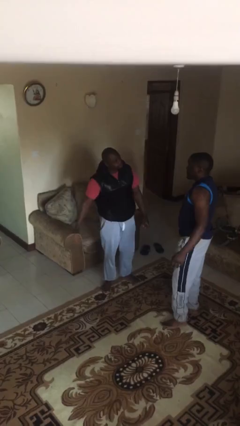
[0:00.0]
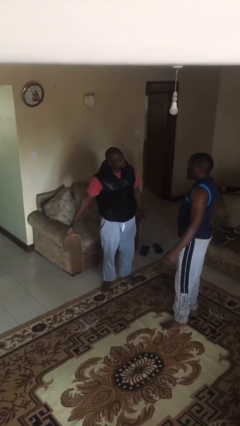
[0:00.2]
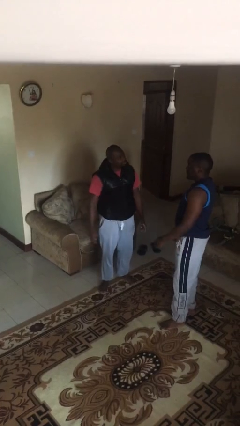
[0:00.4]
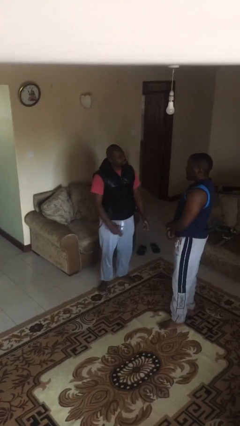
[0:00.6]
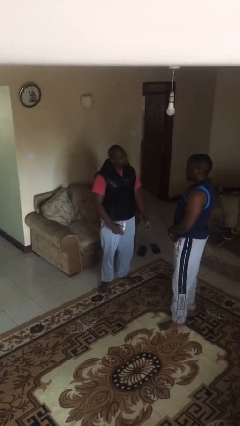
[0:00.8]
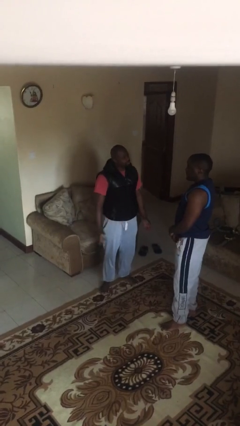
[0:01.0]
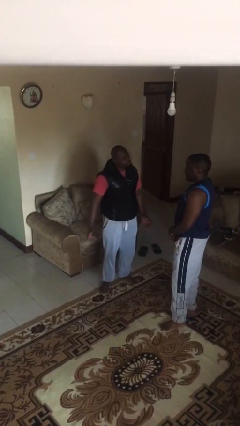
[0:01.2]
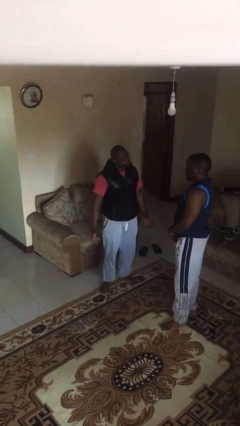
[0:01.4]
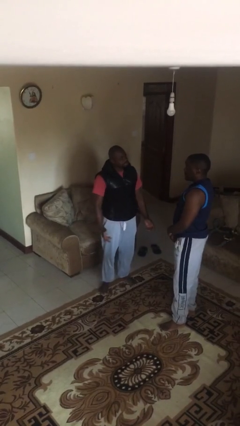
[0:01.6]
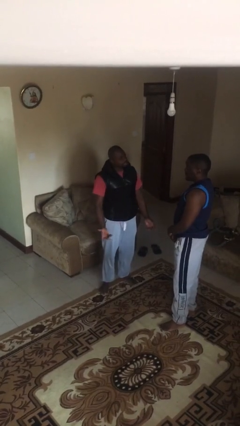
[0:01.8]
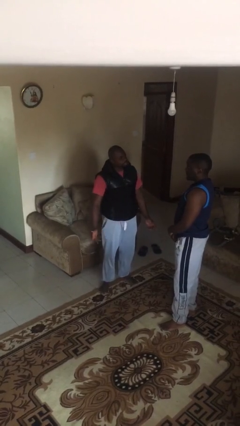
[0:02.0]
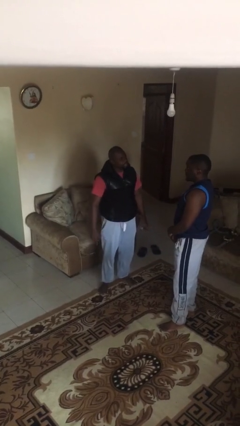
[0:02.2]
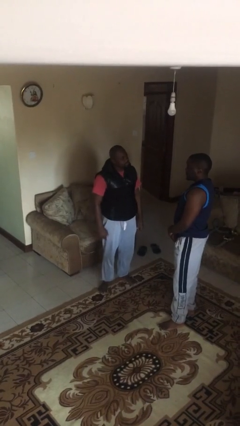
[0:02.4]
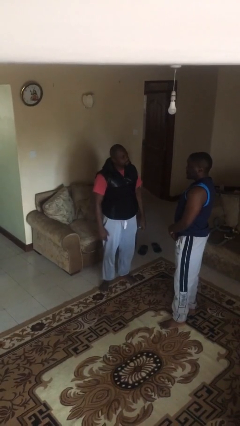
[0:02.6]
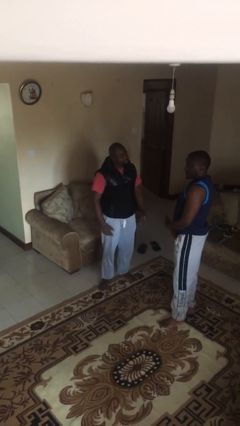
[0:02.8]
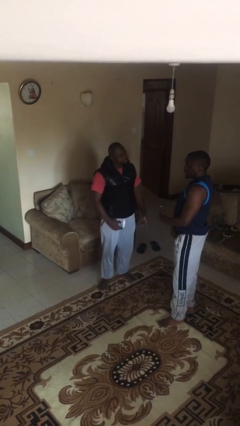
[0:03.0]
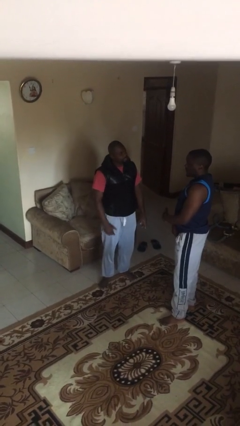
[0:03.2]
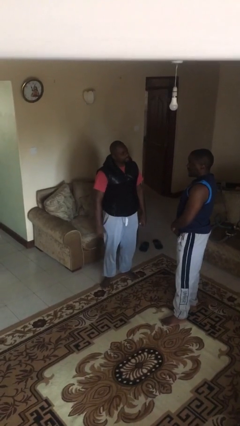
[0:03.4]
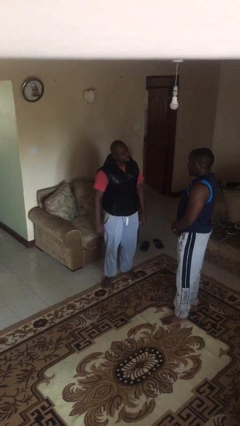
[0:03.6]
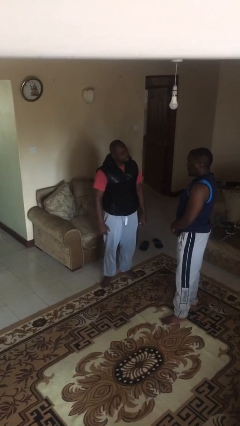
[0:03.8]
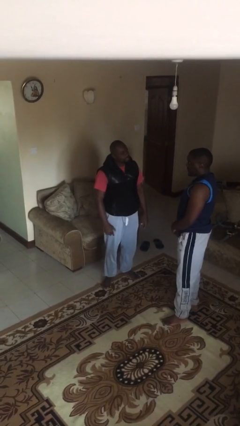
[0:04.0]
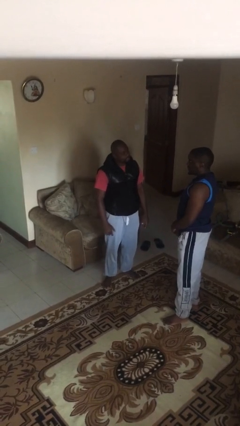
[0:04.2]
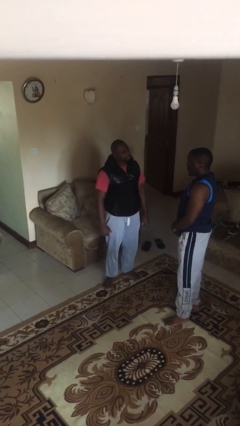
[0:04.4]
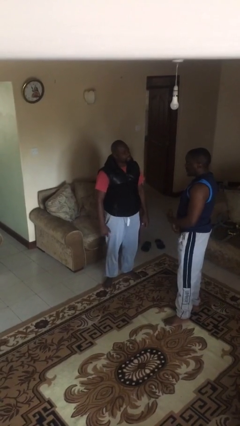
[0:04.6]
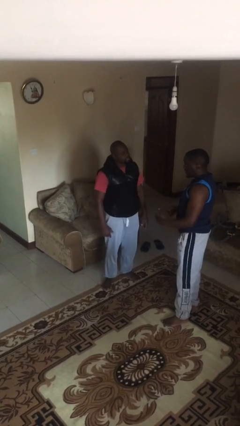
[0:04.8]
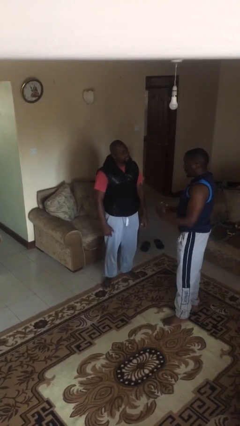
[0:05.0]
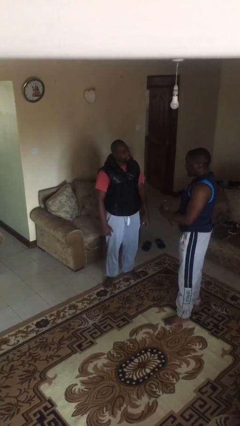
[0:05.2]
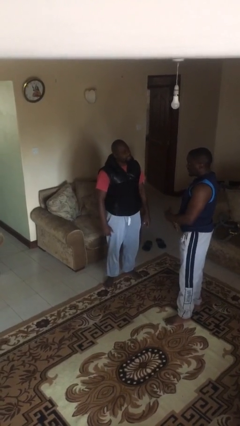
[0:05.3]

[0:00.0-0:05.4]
person talks to person

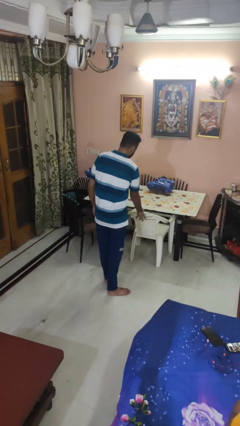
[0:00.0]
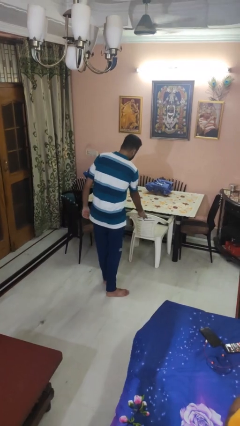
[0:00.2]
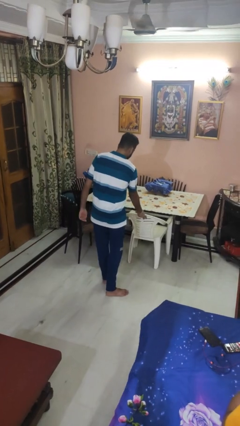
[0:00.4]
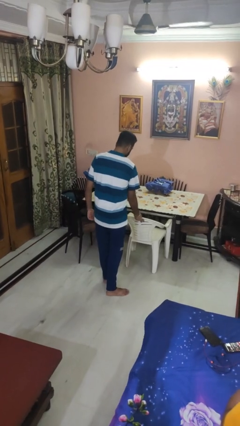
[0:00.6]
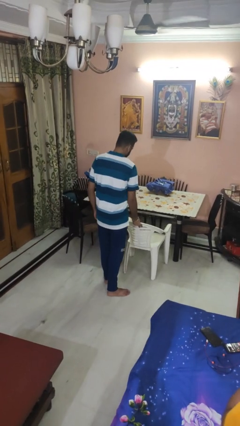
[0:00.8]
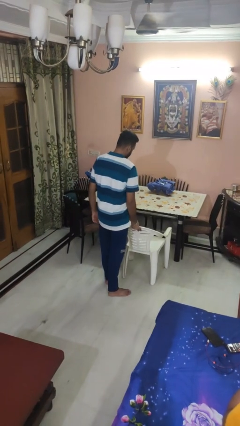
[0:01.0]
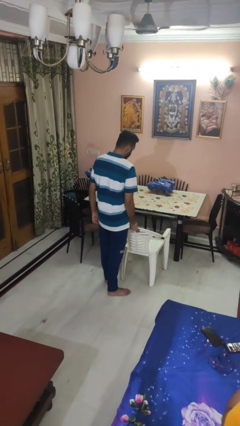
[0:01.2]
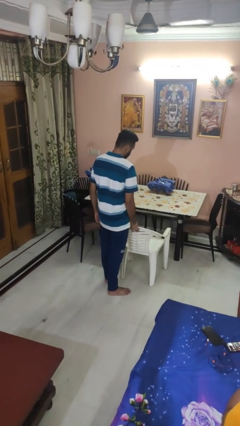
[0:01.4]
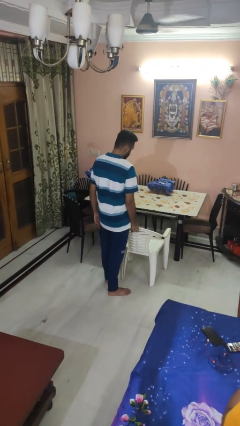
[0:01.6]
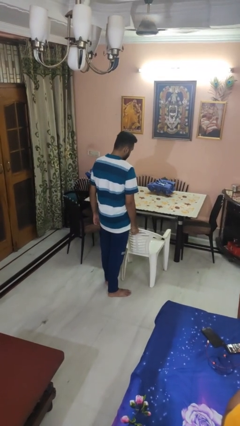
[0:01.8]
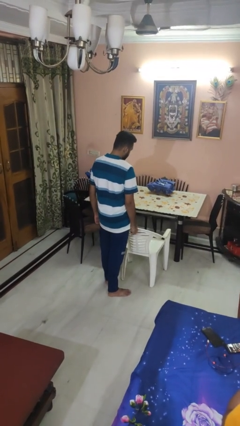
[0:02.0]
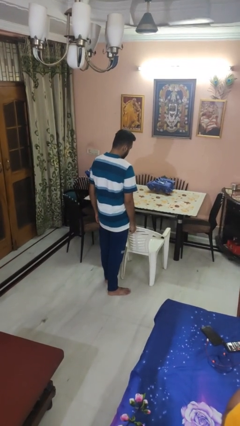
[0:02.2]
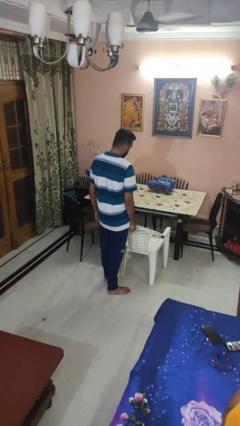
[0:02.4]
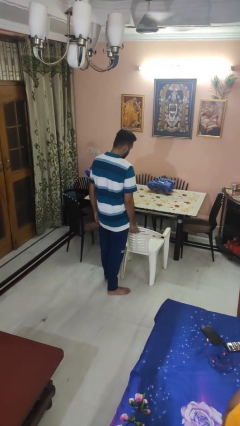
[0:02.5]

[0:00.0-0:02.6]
person pulls out chair

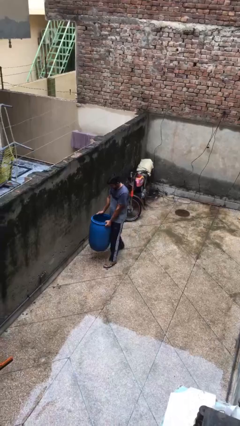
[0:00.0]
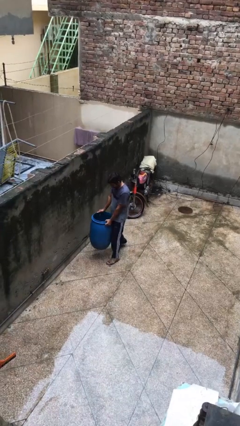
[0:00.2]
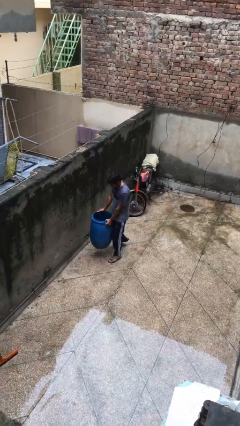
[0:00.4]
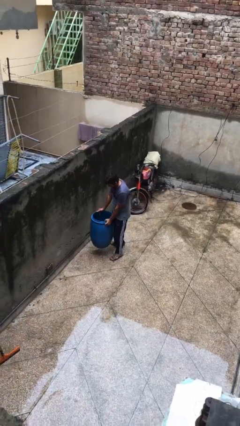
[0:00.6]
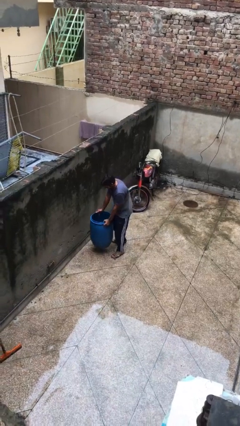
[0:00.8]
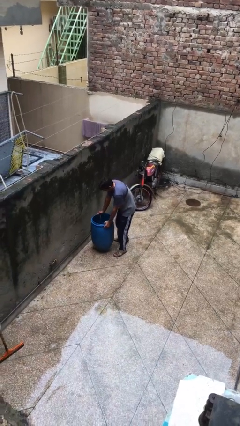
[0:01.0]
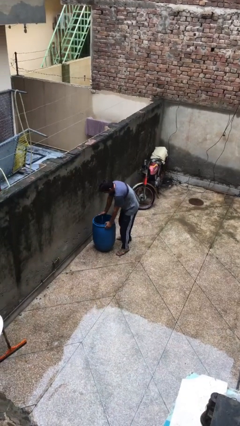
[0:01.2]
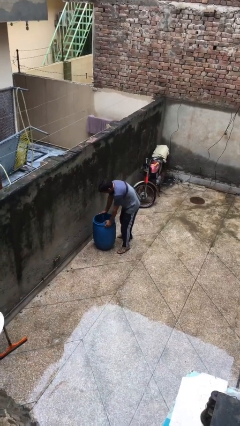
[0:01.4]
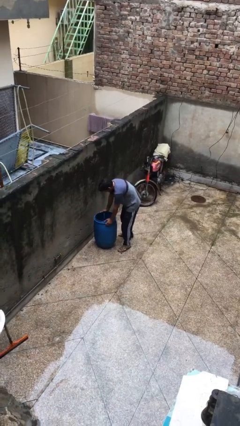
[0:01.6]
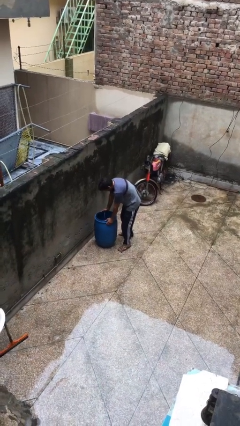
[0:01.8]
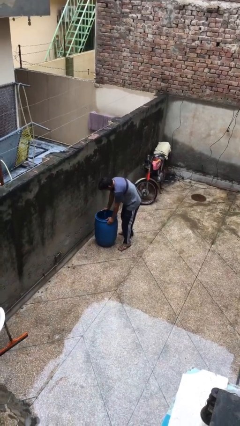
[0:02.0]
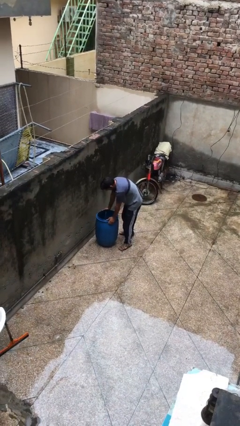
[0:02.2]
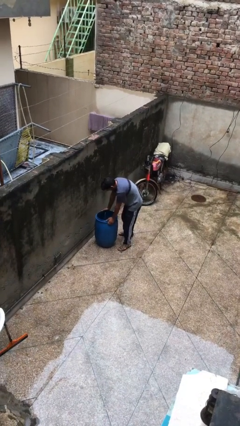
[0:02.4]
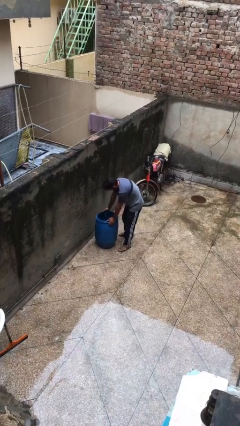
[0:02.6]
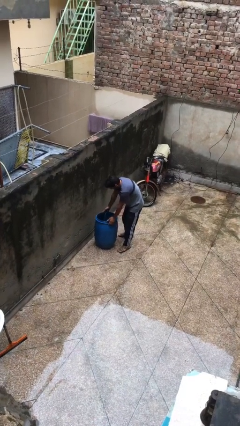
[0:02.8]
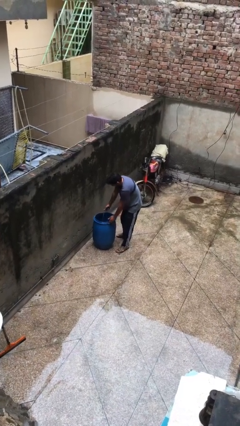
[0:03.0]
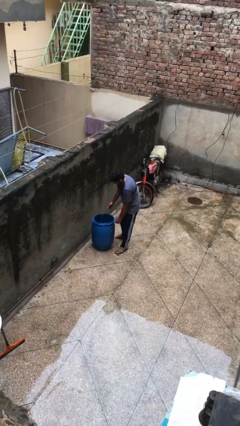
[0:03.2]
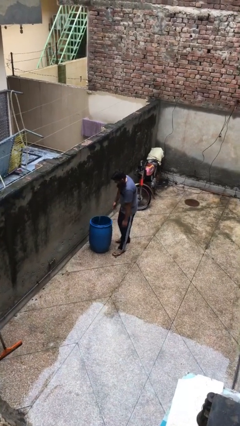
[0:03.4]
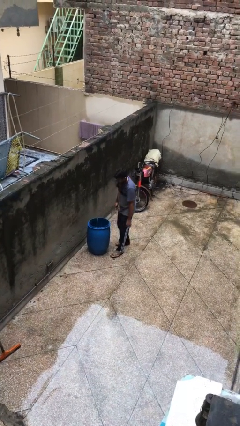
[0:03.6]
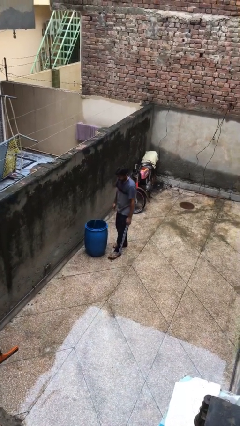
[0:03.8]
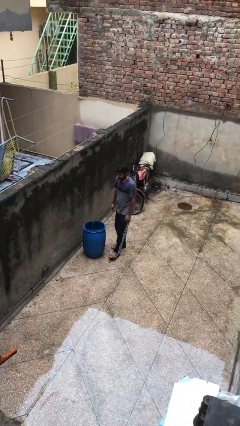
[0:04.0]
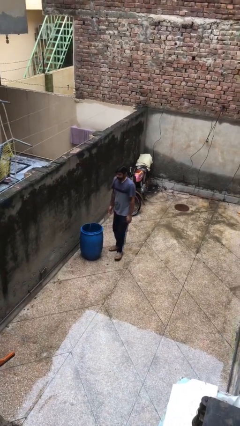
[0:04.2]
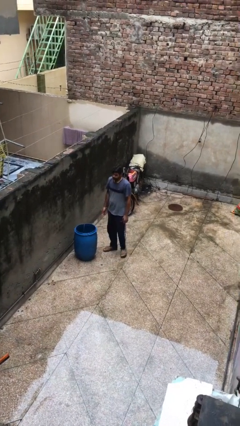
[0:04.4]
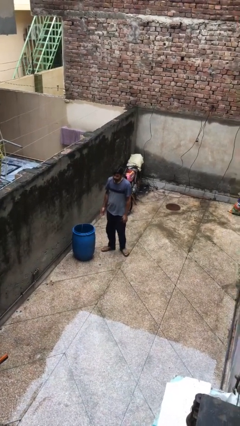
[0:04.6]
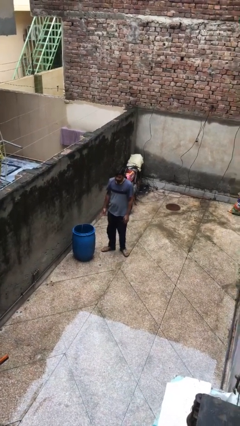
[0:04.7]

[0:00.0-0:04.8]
person puts down object on floor

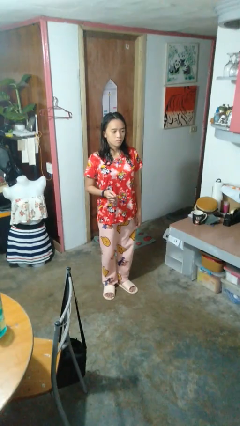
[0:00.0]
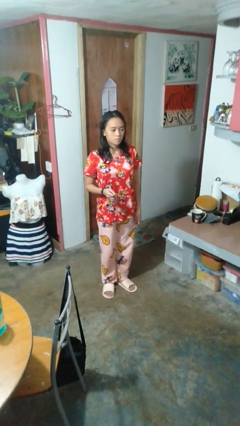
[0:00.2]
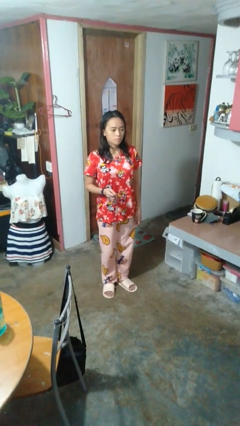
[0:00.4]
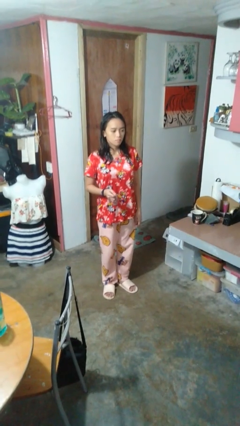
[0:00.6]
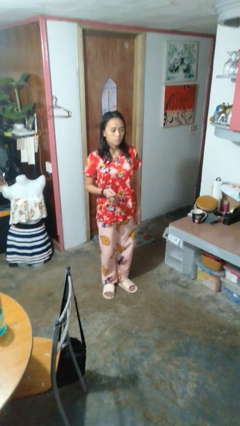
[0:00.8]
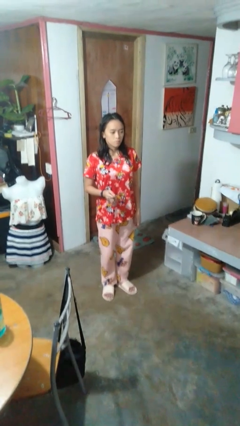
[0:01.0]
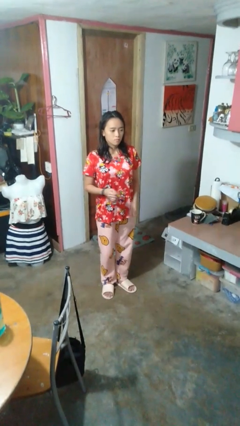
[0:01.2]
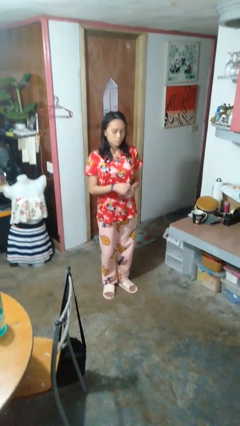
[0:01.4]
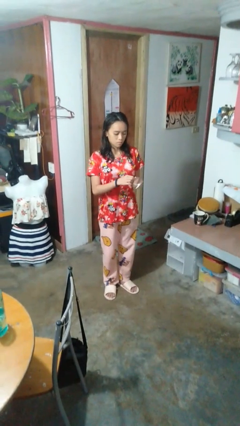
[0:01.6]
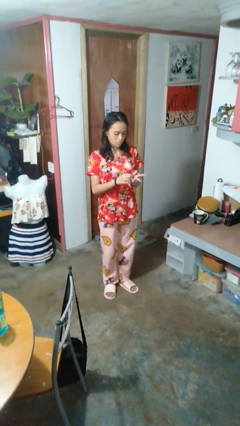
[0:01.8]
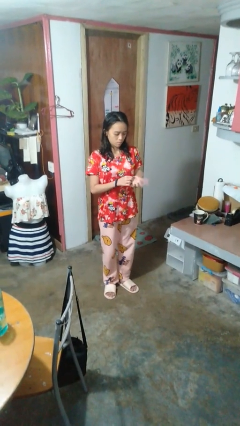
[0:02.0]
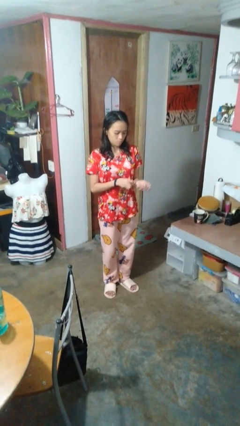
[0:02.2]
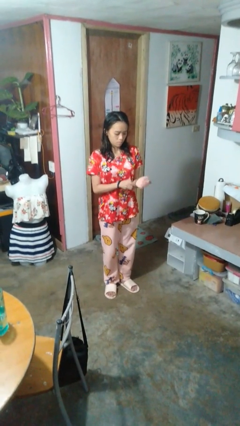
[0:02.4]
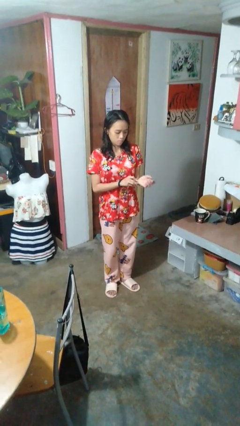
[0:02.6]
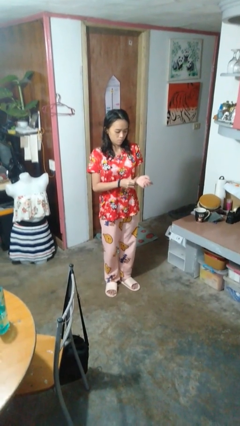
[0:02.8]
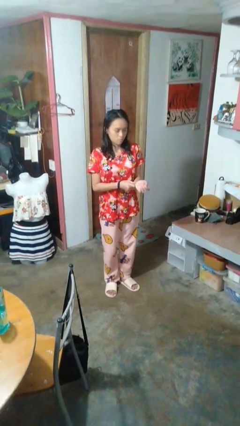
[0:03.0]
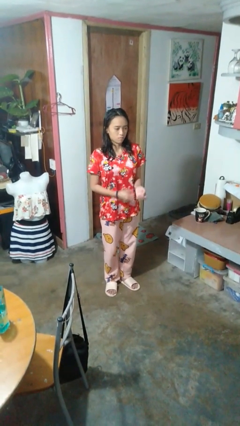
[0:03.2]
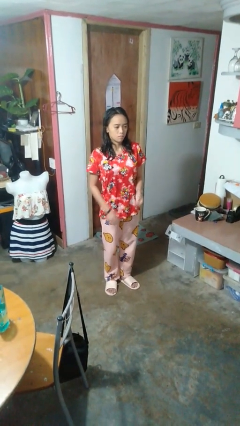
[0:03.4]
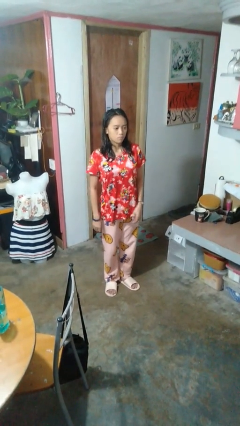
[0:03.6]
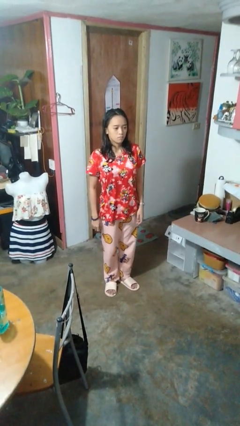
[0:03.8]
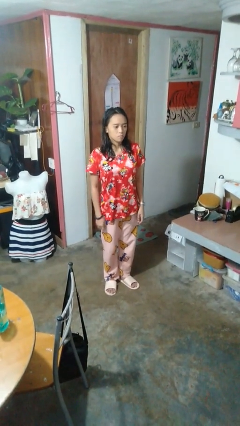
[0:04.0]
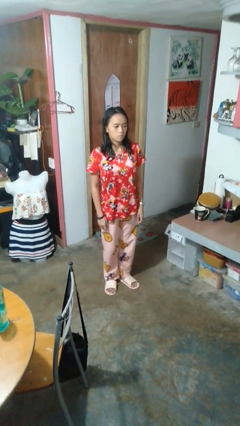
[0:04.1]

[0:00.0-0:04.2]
person puts on wristwatch

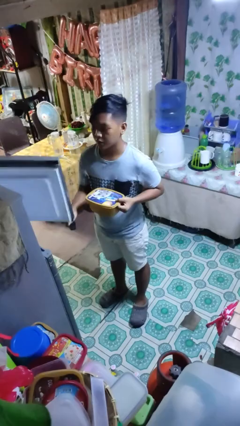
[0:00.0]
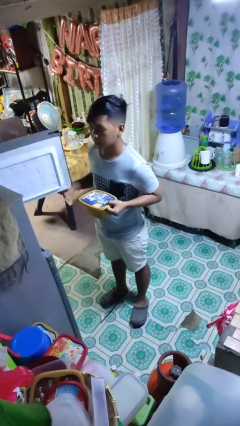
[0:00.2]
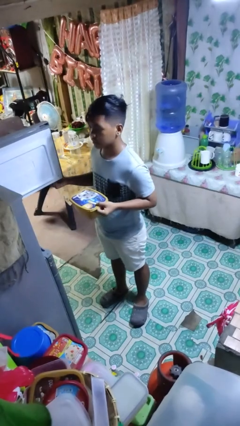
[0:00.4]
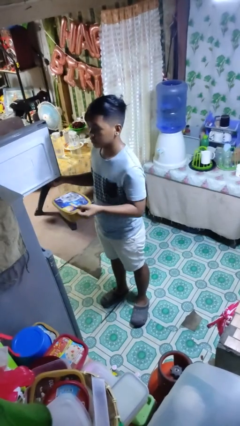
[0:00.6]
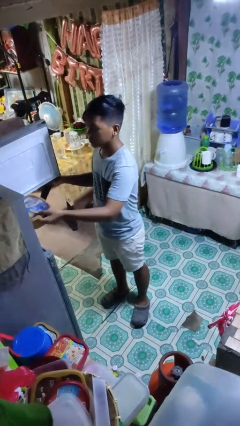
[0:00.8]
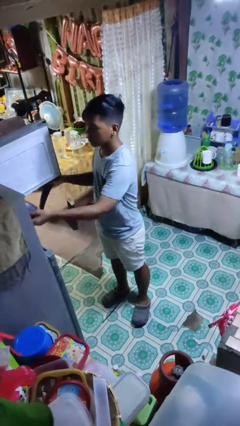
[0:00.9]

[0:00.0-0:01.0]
person opens refrigerator
